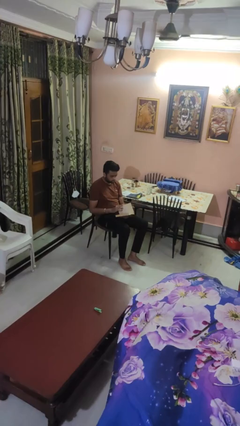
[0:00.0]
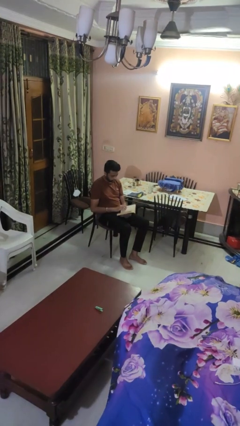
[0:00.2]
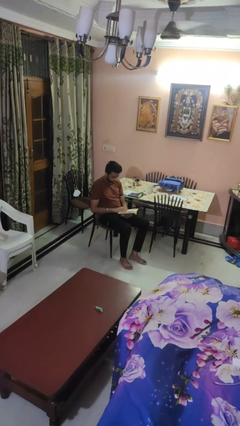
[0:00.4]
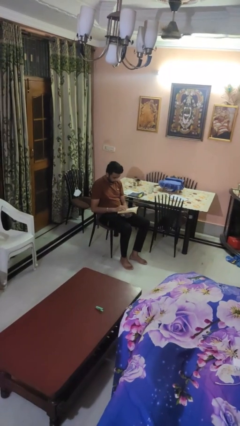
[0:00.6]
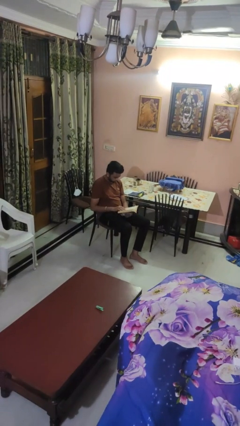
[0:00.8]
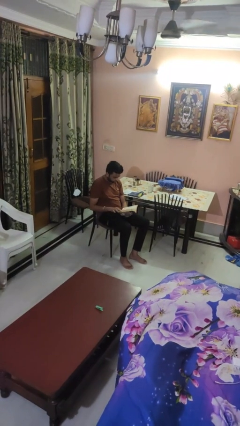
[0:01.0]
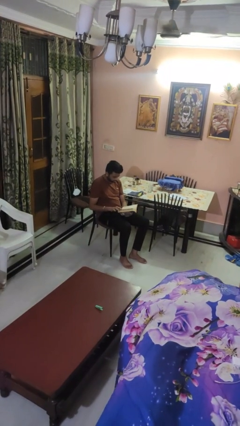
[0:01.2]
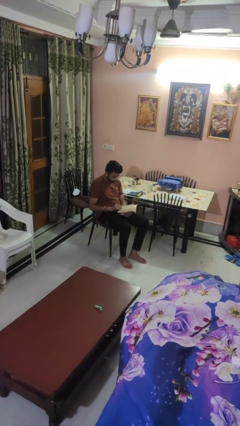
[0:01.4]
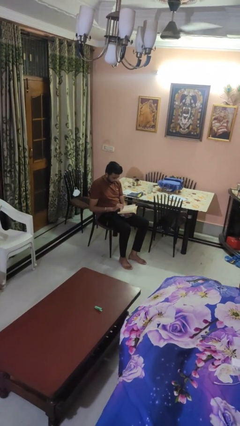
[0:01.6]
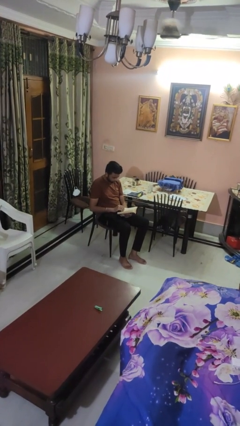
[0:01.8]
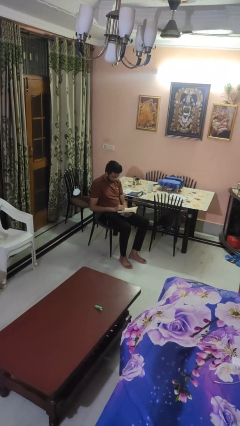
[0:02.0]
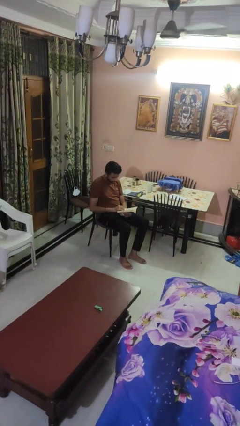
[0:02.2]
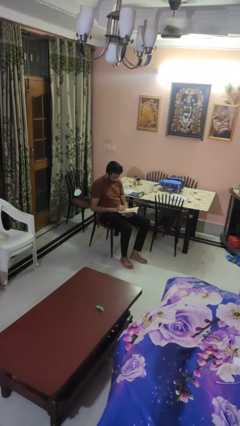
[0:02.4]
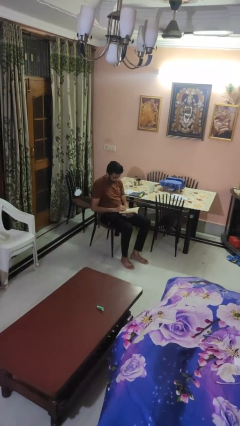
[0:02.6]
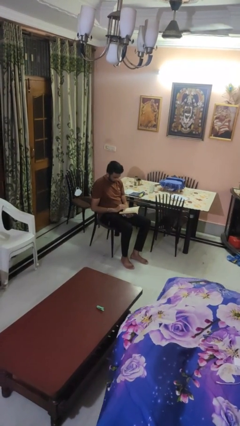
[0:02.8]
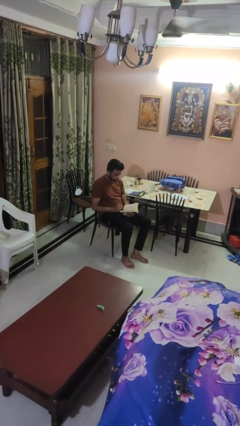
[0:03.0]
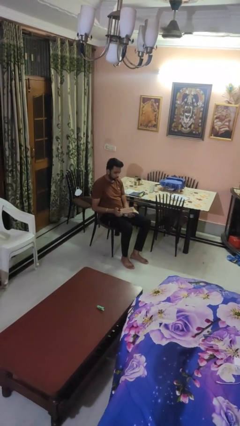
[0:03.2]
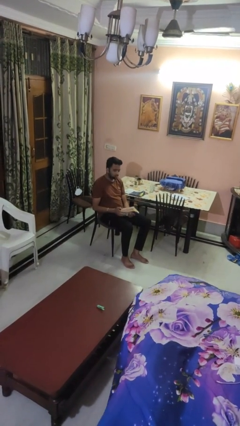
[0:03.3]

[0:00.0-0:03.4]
person reads book

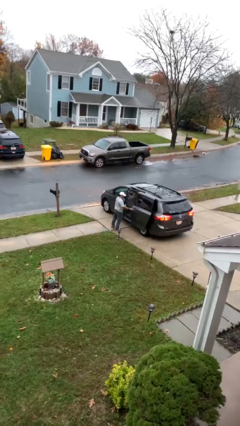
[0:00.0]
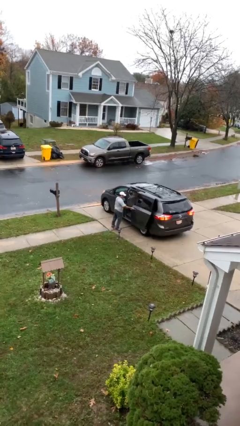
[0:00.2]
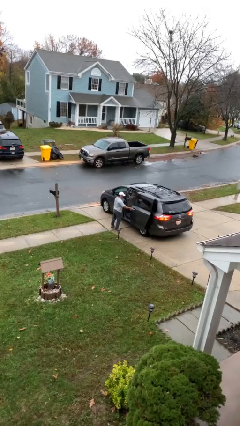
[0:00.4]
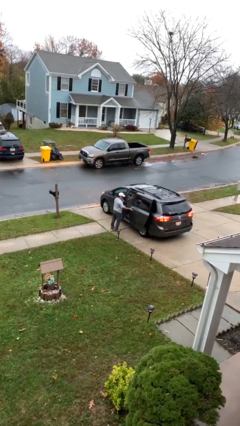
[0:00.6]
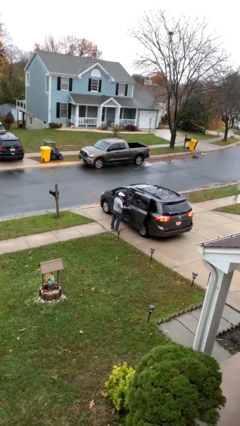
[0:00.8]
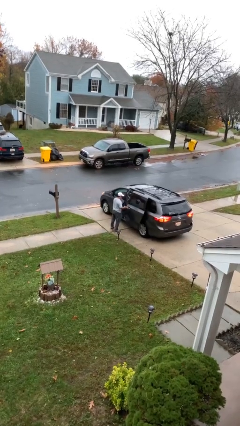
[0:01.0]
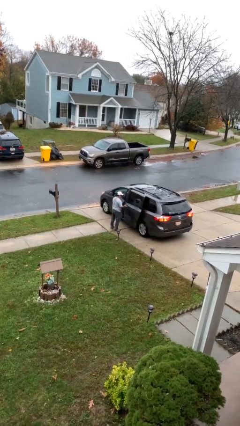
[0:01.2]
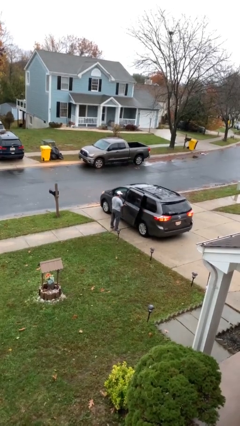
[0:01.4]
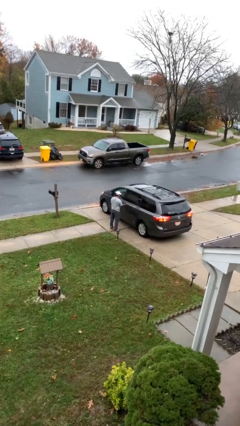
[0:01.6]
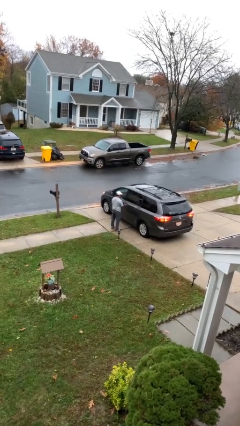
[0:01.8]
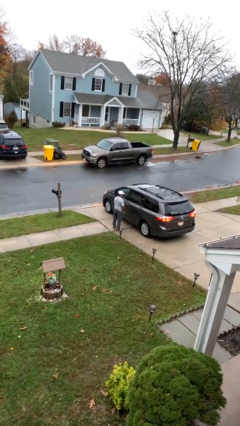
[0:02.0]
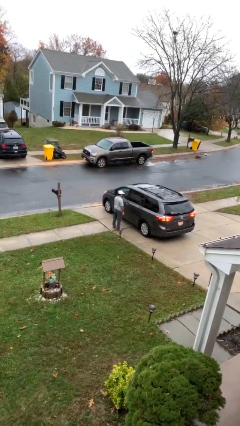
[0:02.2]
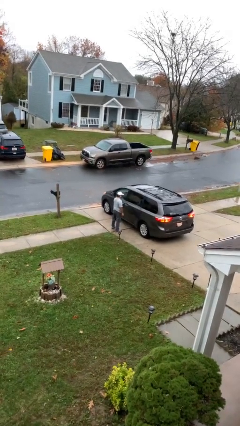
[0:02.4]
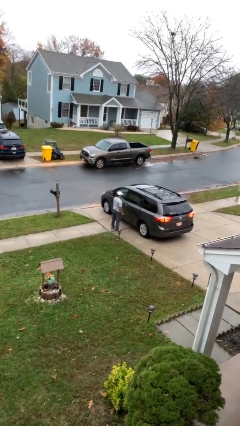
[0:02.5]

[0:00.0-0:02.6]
person closes car door

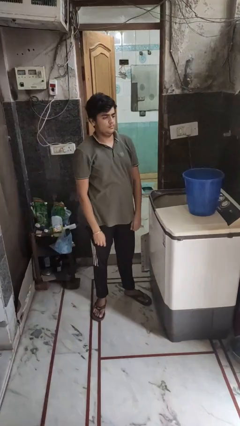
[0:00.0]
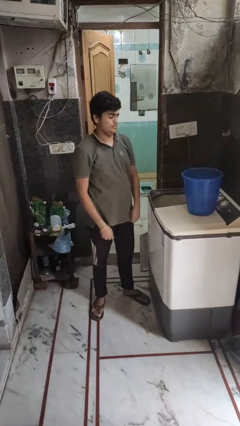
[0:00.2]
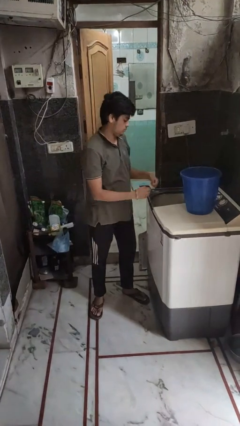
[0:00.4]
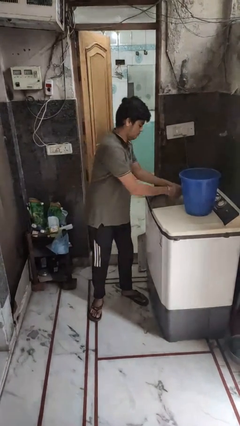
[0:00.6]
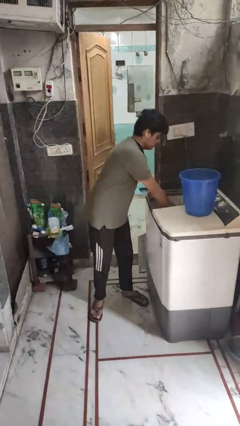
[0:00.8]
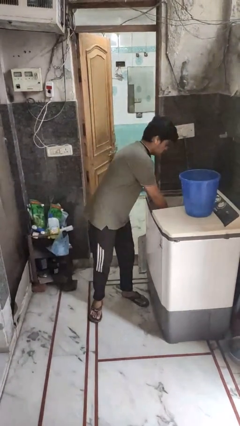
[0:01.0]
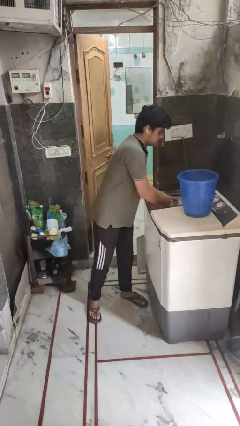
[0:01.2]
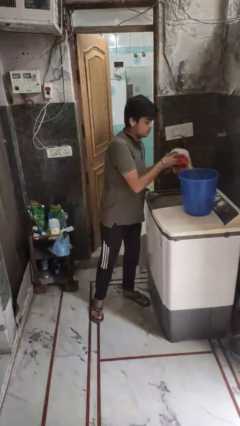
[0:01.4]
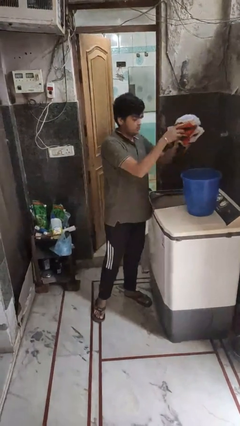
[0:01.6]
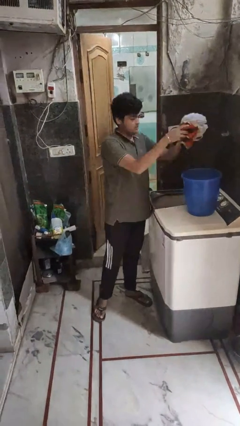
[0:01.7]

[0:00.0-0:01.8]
person unloads clotheswasher

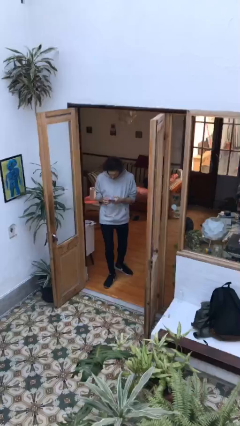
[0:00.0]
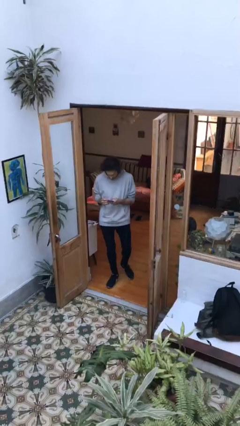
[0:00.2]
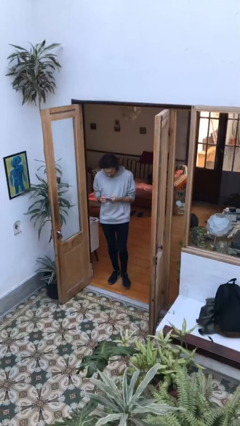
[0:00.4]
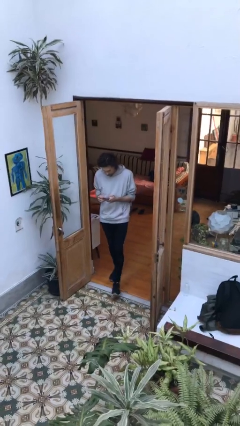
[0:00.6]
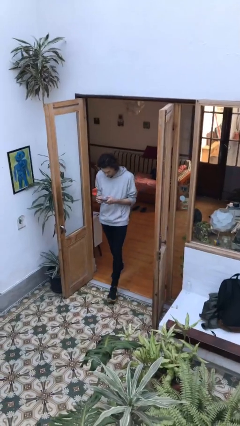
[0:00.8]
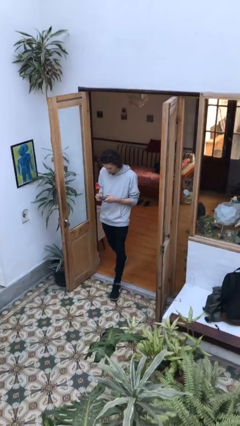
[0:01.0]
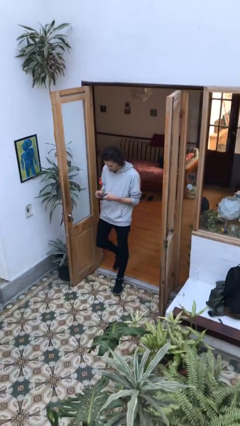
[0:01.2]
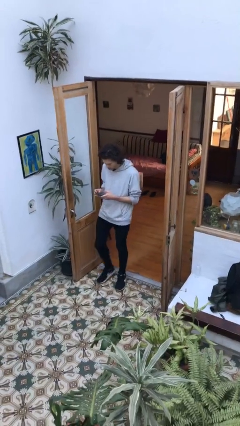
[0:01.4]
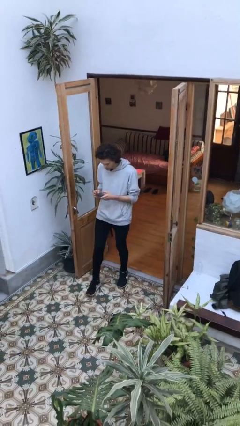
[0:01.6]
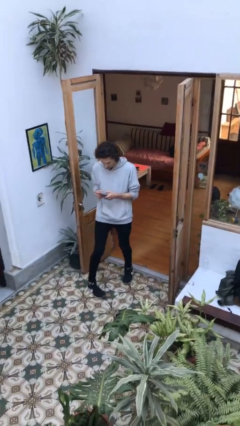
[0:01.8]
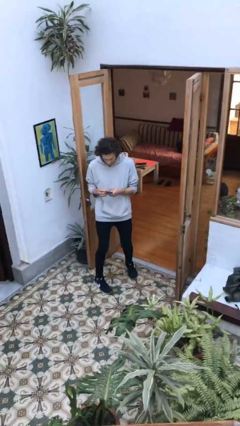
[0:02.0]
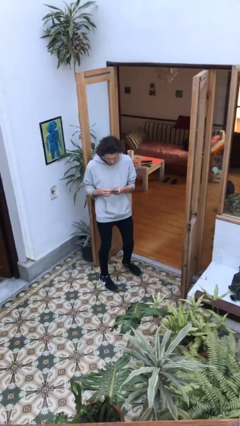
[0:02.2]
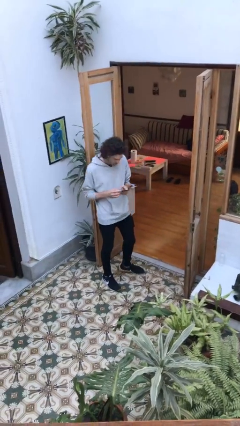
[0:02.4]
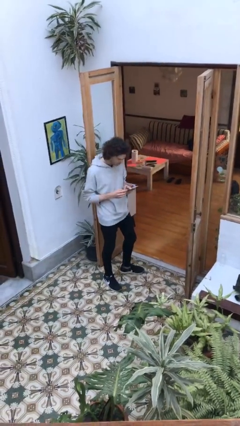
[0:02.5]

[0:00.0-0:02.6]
person enters scene through structure

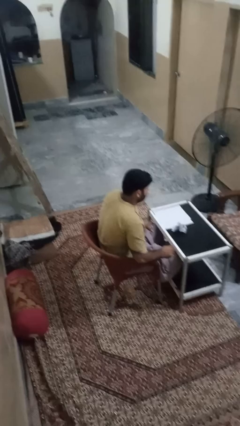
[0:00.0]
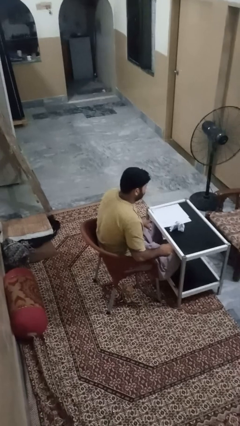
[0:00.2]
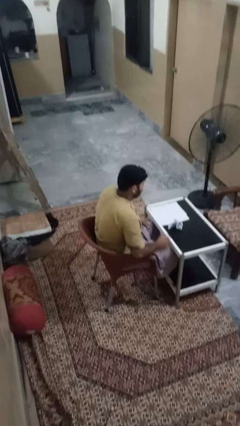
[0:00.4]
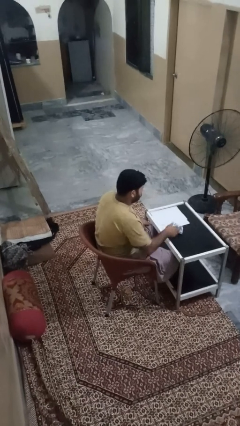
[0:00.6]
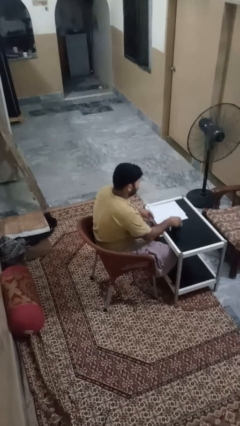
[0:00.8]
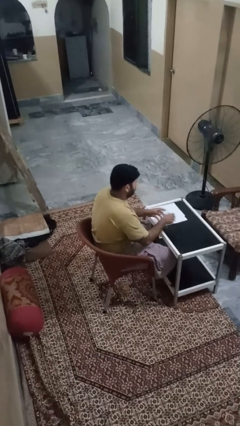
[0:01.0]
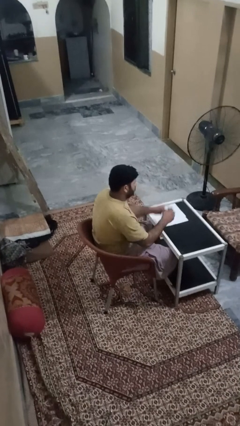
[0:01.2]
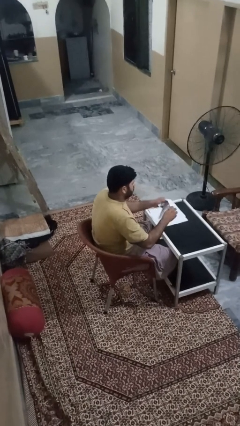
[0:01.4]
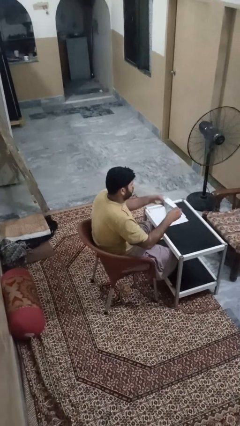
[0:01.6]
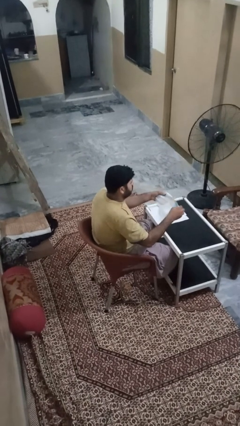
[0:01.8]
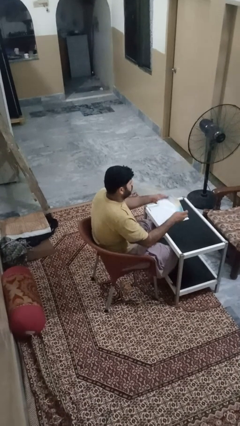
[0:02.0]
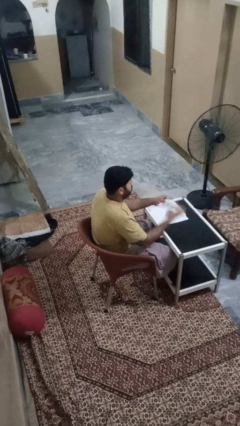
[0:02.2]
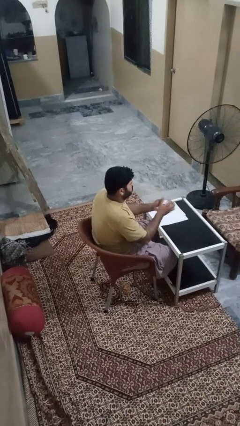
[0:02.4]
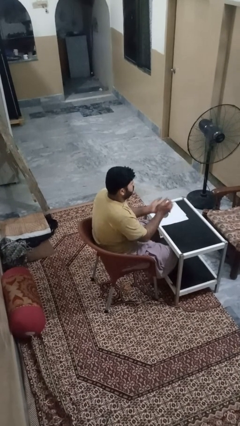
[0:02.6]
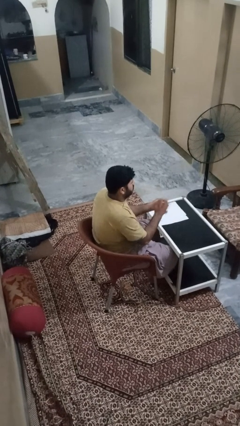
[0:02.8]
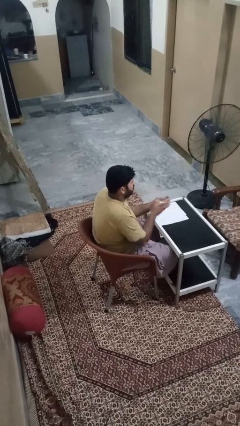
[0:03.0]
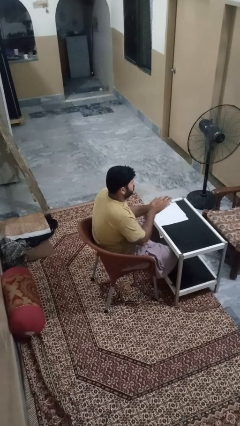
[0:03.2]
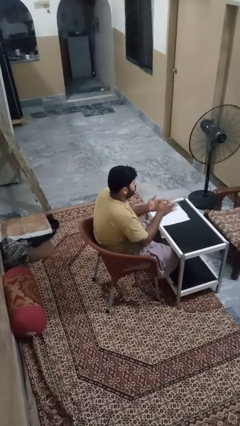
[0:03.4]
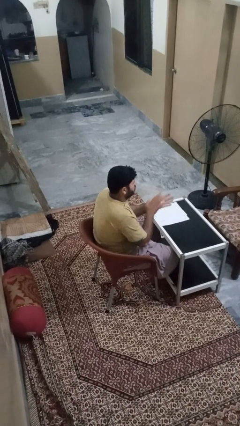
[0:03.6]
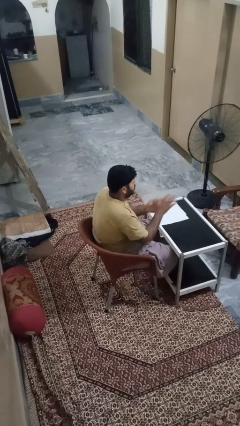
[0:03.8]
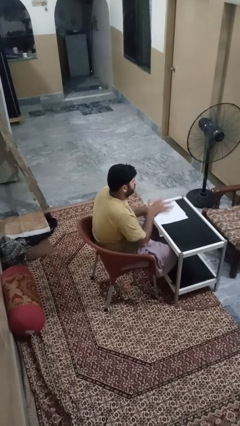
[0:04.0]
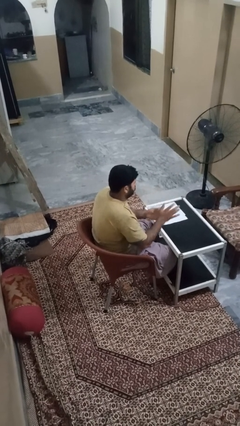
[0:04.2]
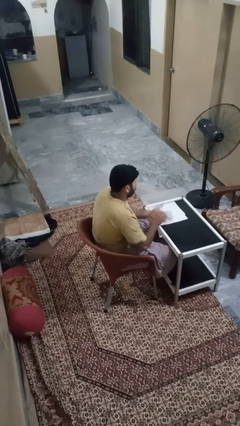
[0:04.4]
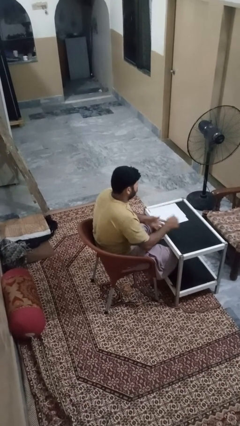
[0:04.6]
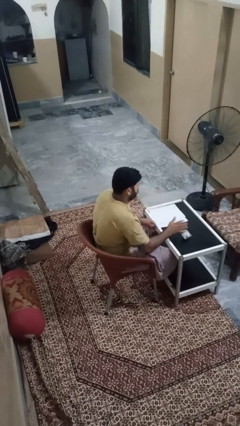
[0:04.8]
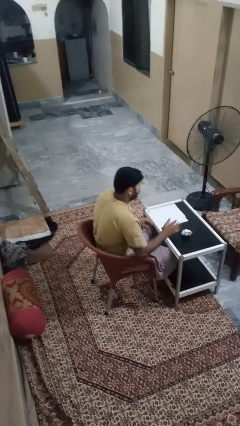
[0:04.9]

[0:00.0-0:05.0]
person crumples paper

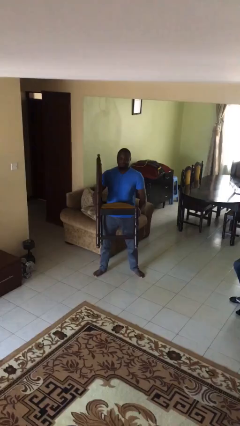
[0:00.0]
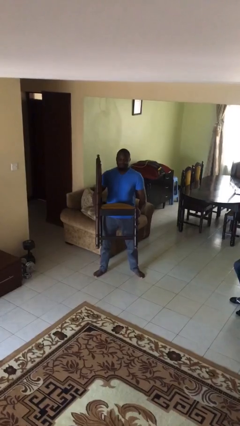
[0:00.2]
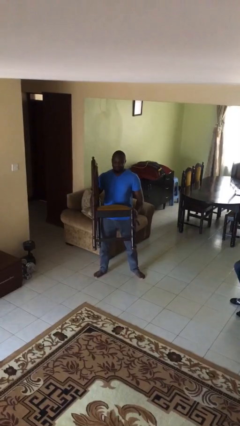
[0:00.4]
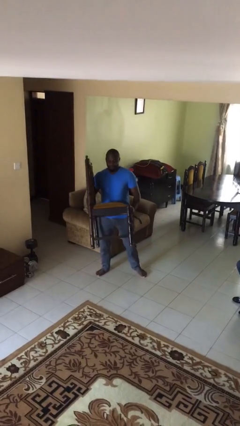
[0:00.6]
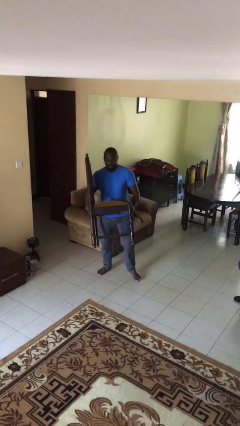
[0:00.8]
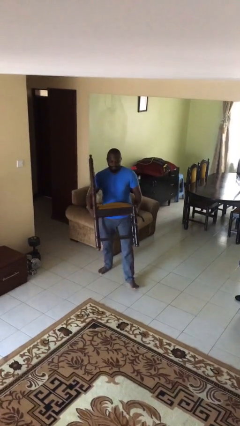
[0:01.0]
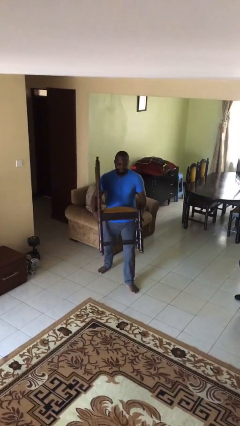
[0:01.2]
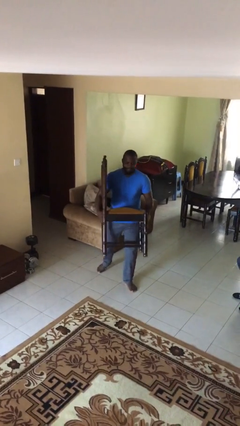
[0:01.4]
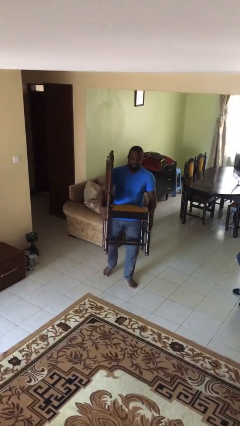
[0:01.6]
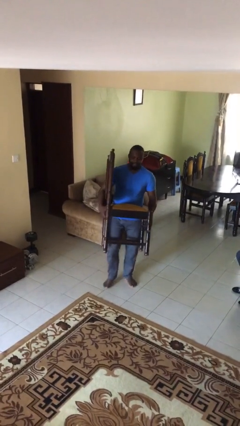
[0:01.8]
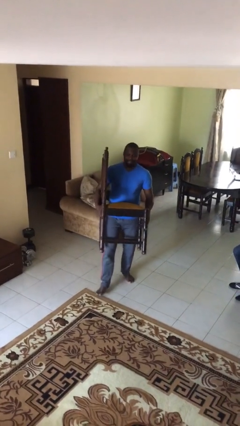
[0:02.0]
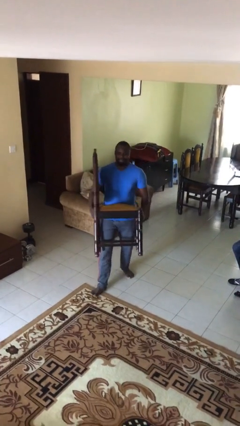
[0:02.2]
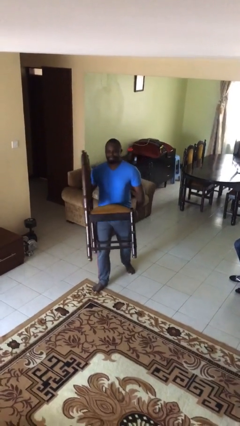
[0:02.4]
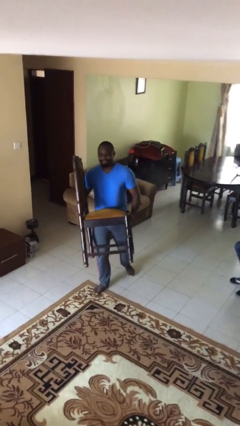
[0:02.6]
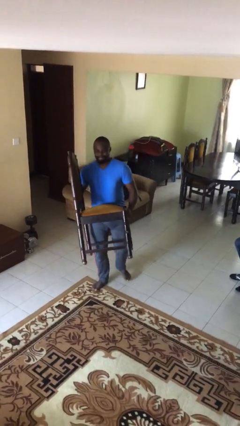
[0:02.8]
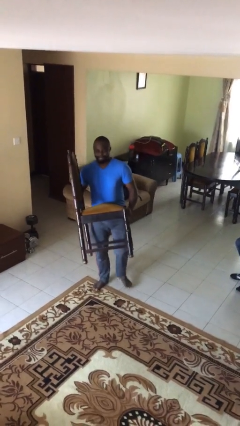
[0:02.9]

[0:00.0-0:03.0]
person carries heavy object
